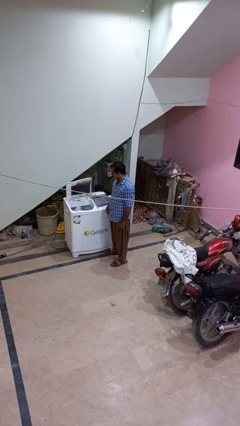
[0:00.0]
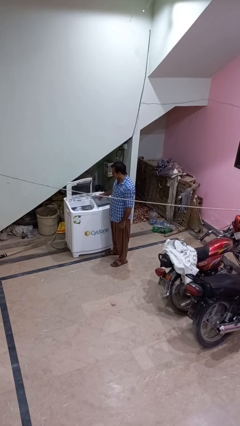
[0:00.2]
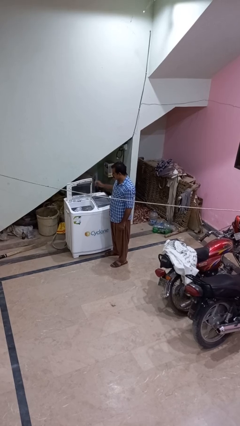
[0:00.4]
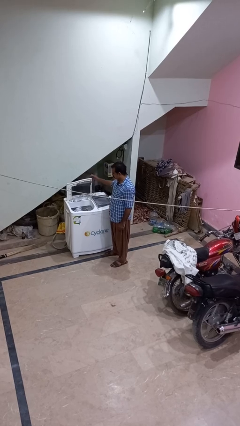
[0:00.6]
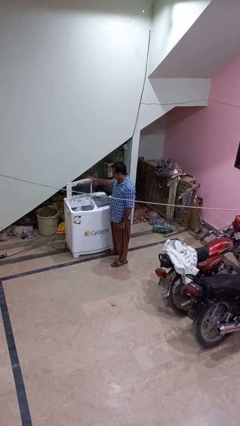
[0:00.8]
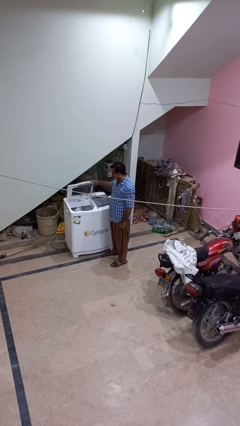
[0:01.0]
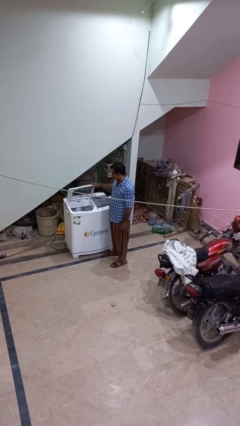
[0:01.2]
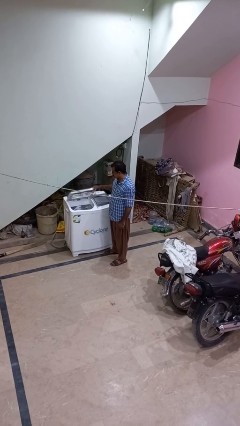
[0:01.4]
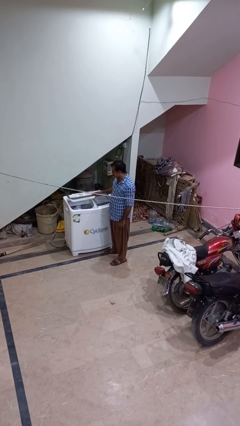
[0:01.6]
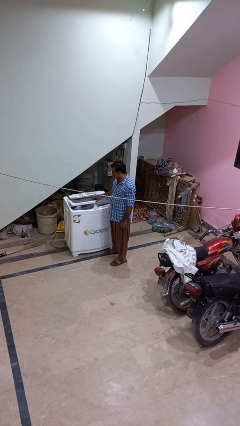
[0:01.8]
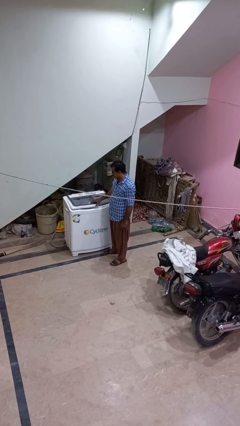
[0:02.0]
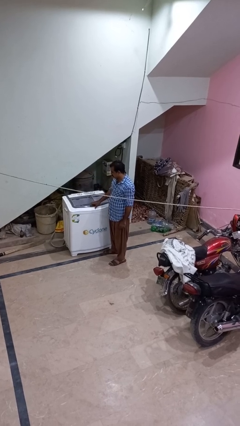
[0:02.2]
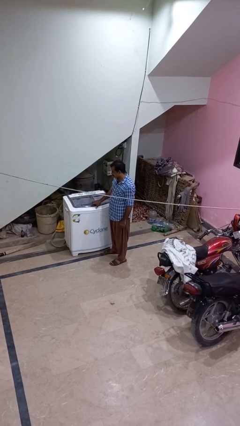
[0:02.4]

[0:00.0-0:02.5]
person closes clothes washer

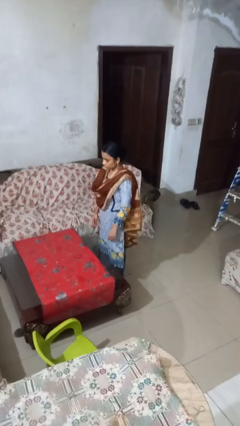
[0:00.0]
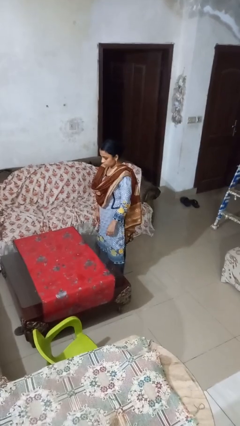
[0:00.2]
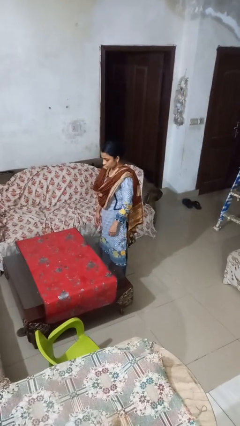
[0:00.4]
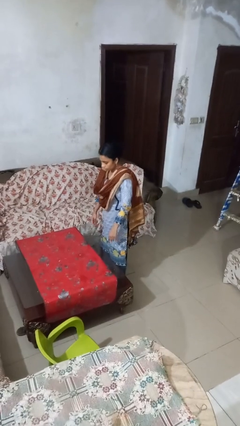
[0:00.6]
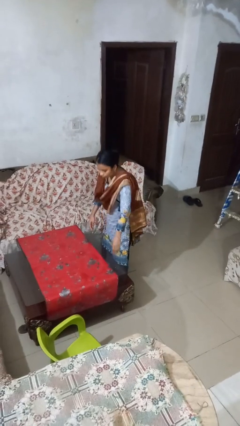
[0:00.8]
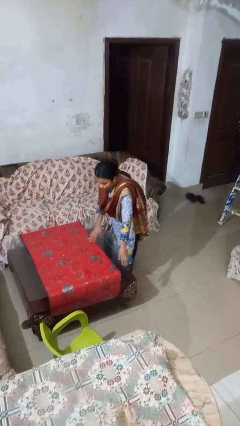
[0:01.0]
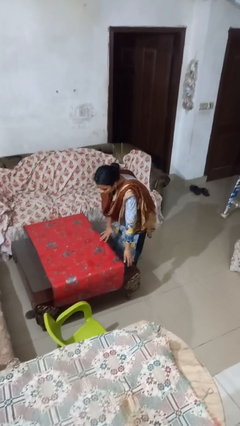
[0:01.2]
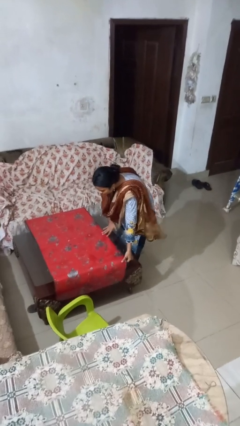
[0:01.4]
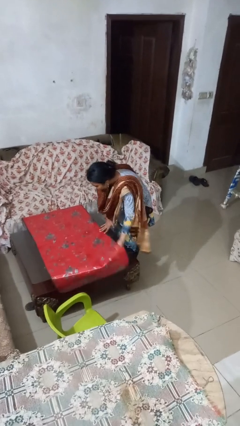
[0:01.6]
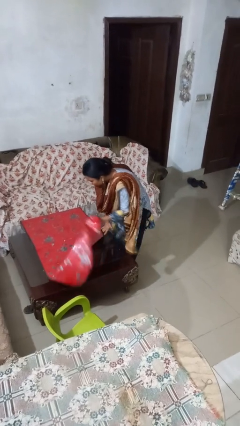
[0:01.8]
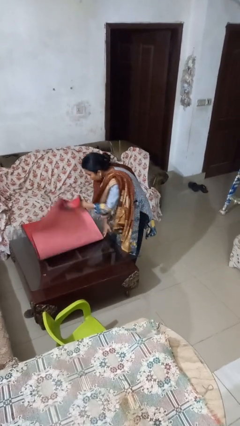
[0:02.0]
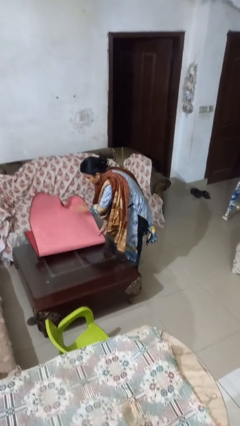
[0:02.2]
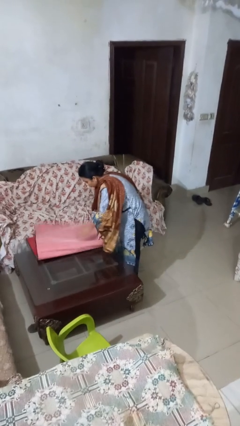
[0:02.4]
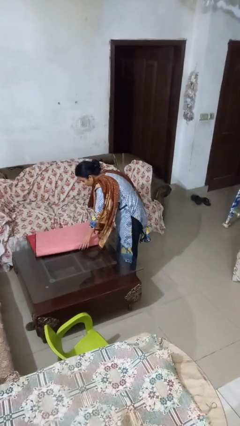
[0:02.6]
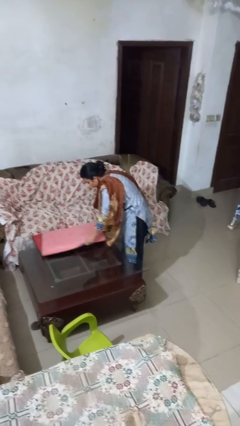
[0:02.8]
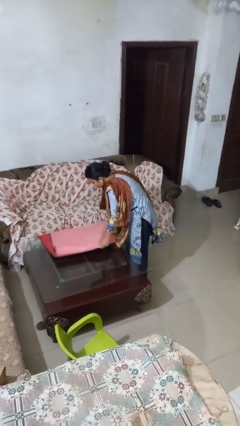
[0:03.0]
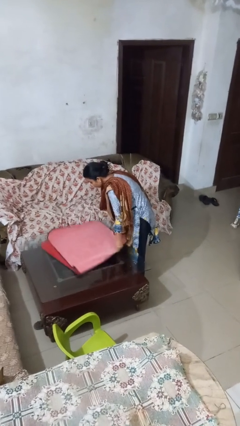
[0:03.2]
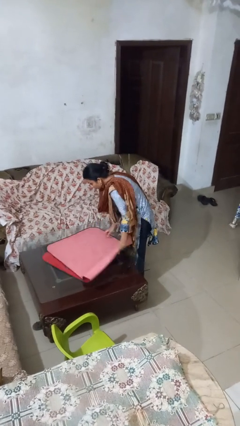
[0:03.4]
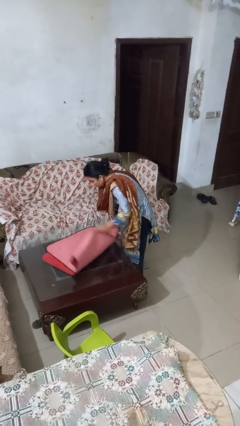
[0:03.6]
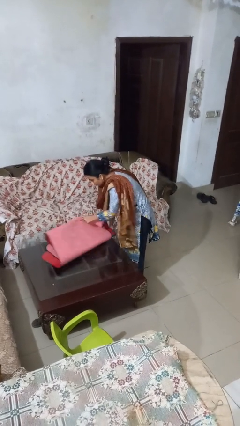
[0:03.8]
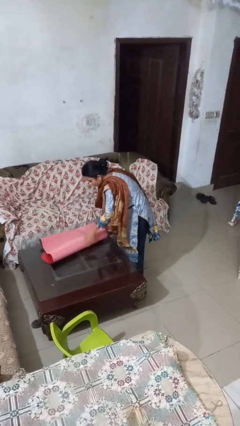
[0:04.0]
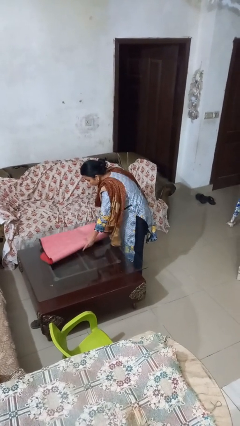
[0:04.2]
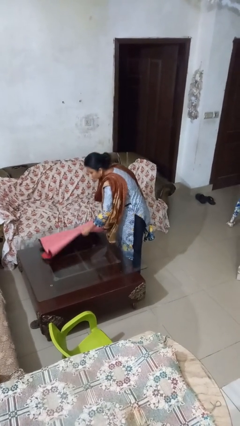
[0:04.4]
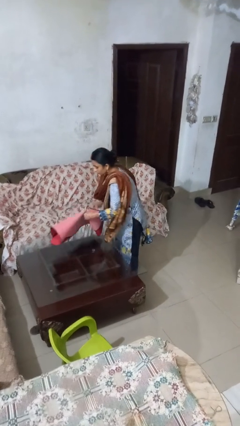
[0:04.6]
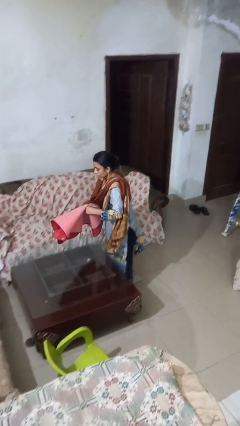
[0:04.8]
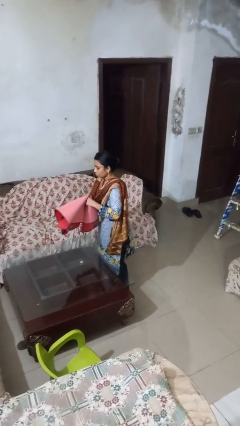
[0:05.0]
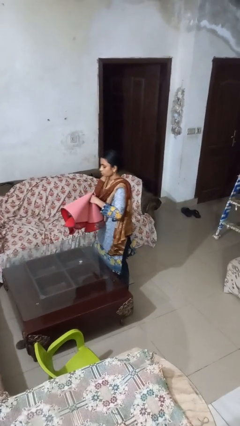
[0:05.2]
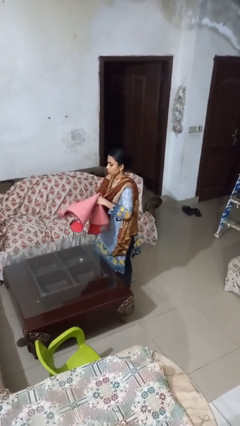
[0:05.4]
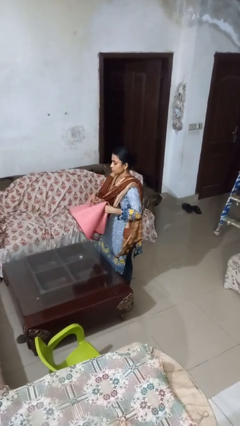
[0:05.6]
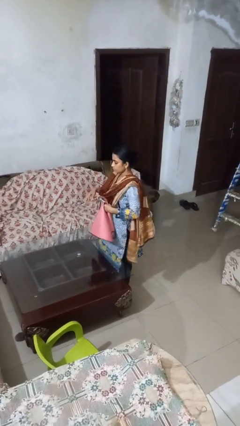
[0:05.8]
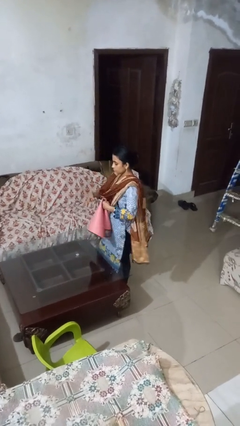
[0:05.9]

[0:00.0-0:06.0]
person folds tablecloth

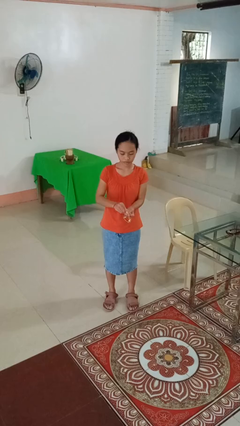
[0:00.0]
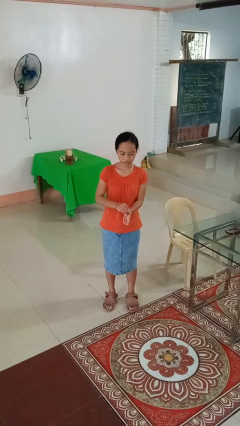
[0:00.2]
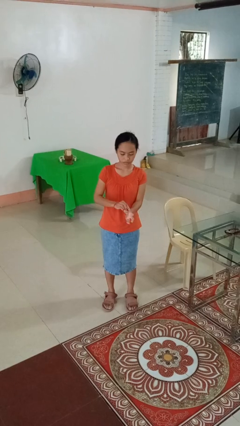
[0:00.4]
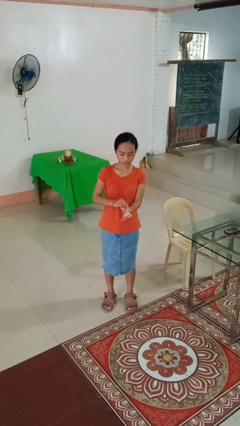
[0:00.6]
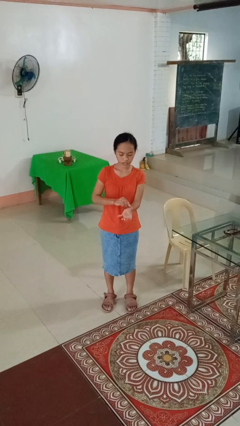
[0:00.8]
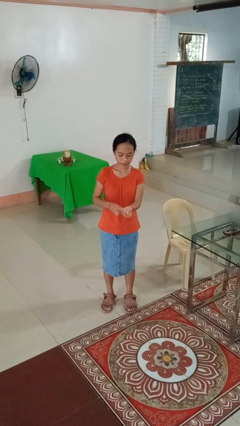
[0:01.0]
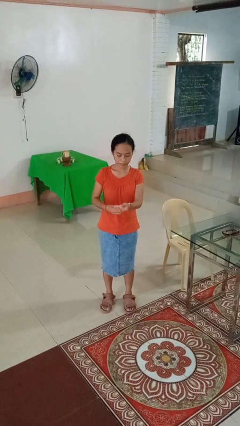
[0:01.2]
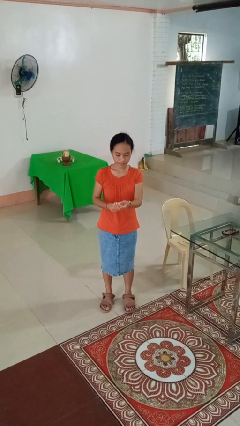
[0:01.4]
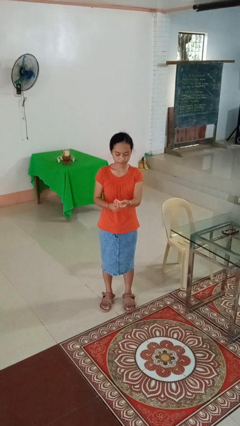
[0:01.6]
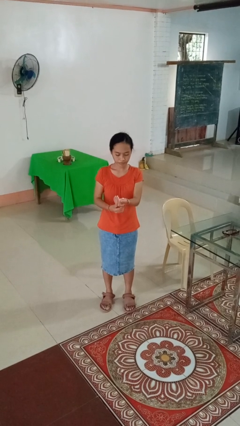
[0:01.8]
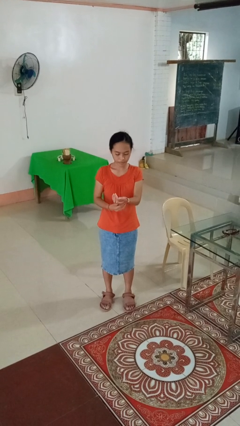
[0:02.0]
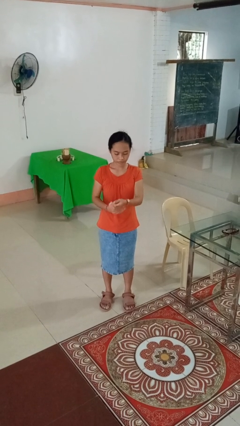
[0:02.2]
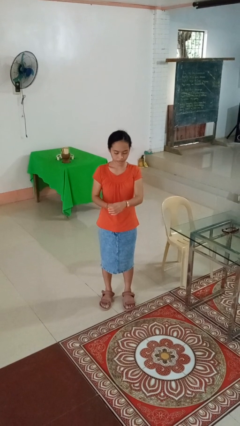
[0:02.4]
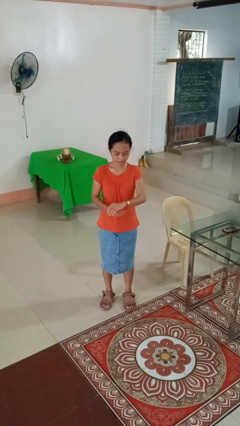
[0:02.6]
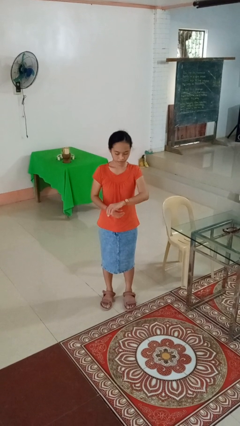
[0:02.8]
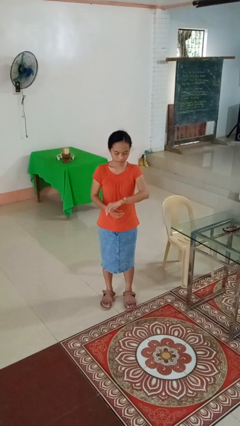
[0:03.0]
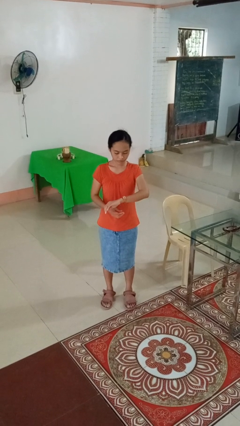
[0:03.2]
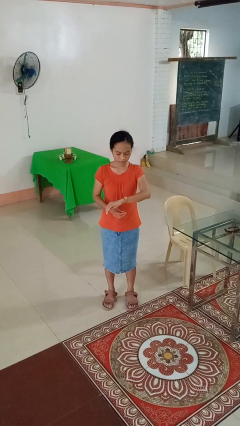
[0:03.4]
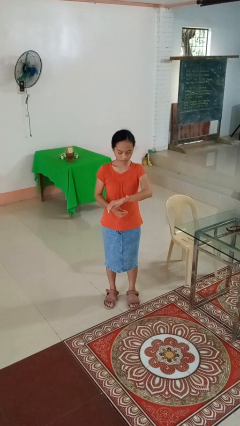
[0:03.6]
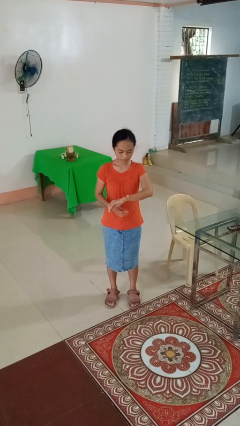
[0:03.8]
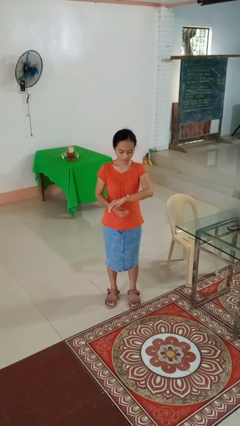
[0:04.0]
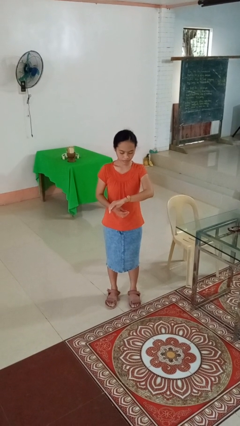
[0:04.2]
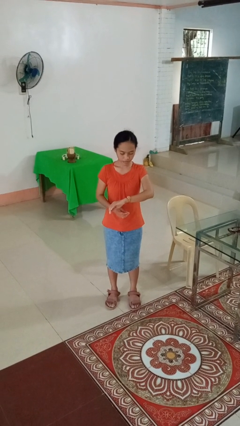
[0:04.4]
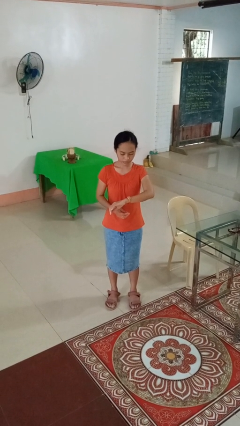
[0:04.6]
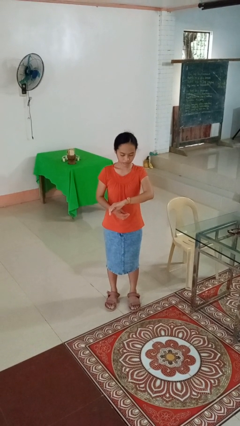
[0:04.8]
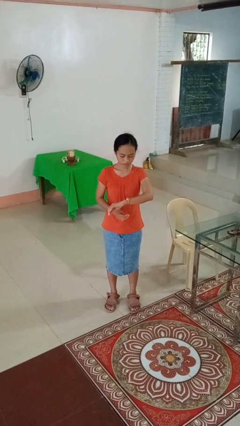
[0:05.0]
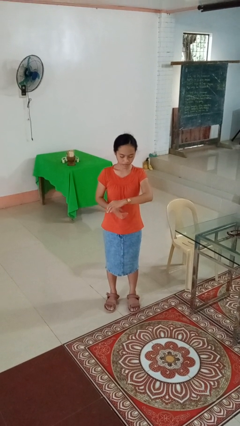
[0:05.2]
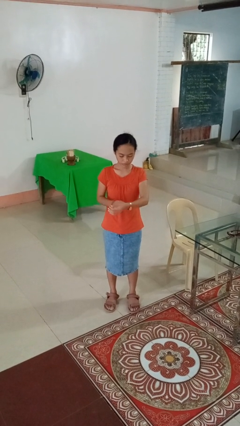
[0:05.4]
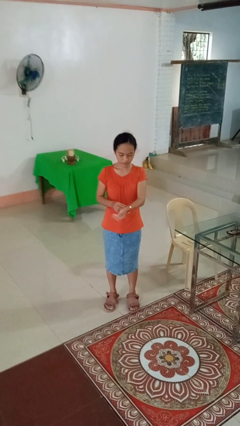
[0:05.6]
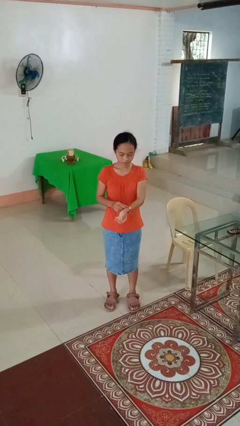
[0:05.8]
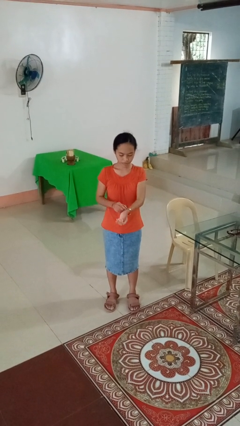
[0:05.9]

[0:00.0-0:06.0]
person puts on wristwatch

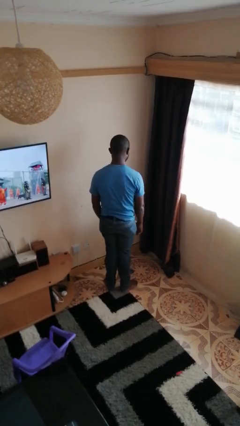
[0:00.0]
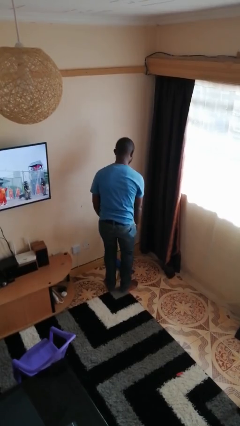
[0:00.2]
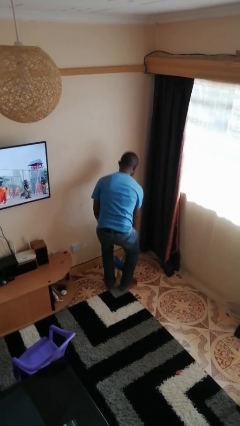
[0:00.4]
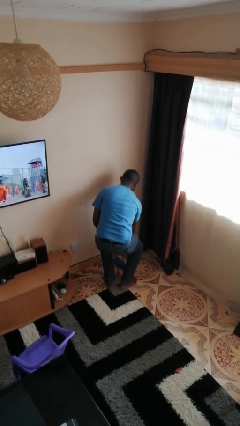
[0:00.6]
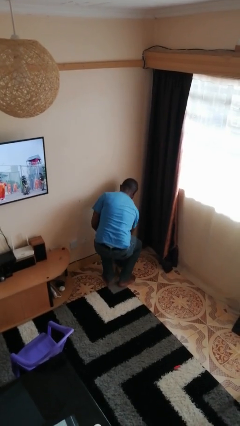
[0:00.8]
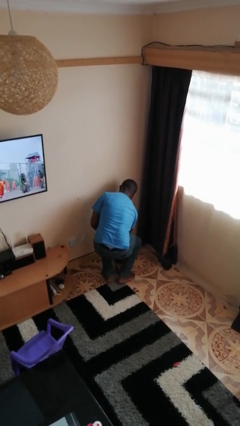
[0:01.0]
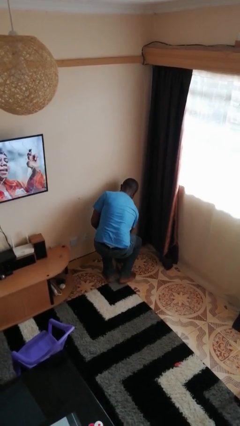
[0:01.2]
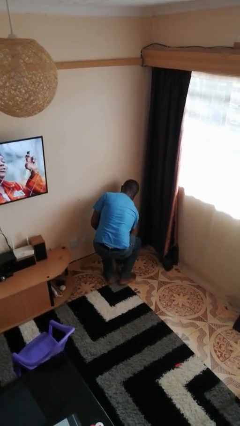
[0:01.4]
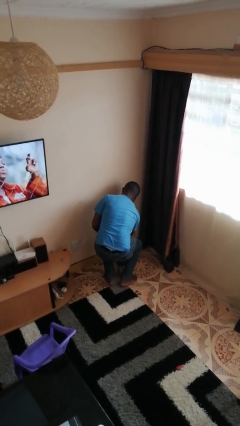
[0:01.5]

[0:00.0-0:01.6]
person picks up object from floor

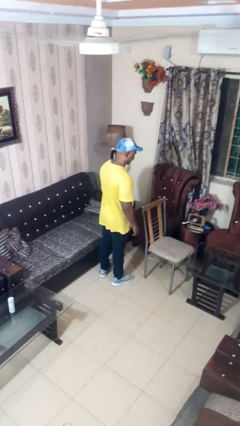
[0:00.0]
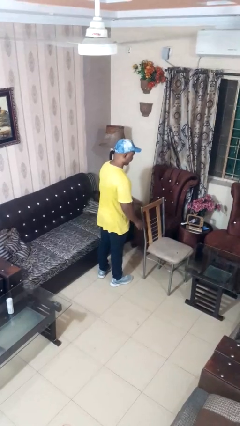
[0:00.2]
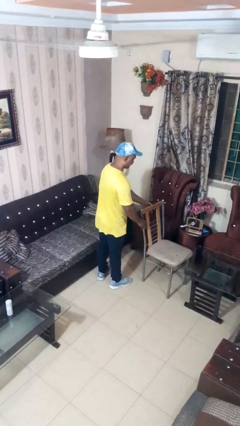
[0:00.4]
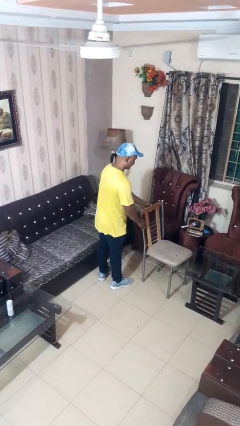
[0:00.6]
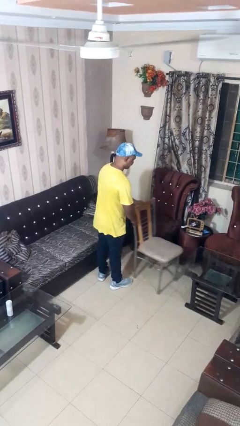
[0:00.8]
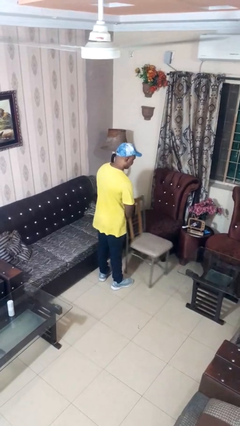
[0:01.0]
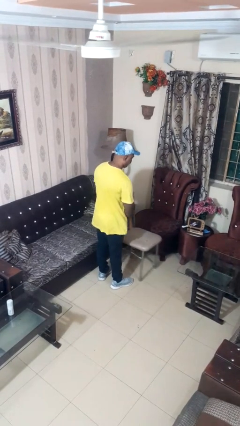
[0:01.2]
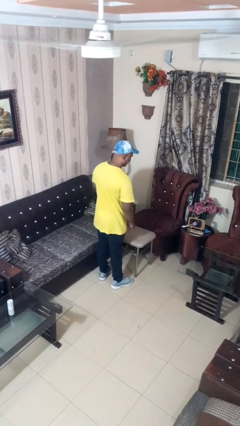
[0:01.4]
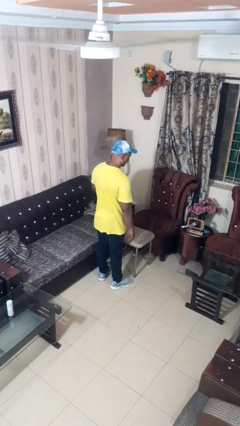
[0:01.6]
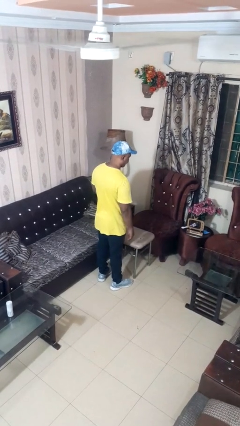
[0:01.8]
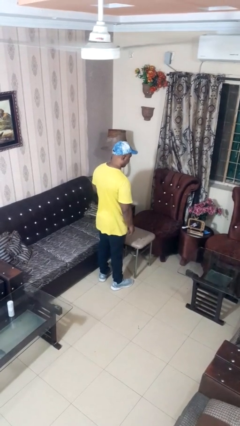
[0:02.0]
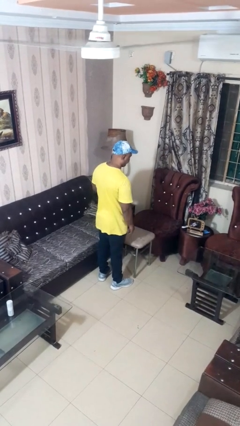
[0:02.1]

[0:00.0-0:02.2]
person pulls out chair
